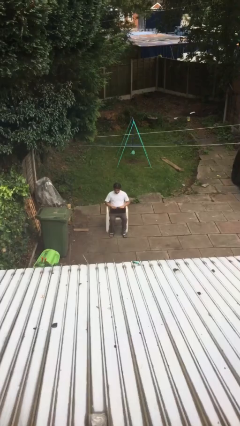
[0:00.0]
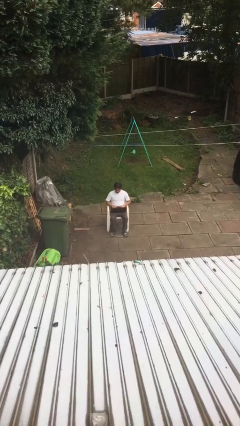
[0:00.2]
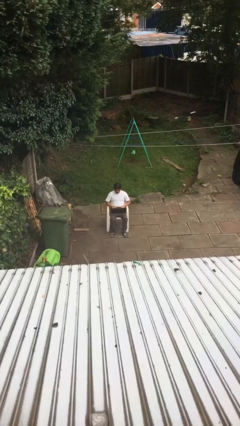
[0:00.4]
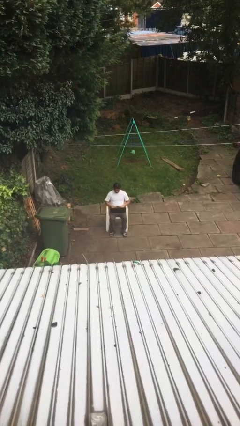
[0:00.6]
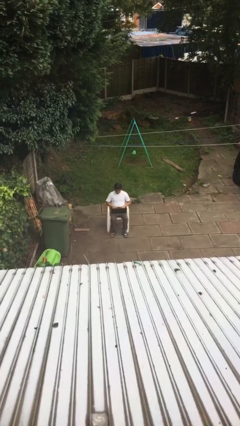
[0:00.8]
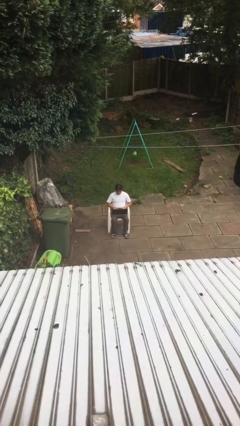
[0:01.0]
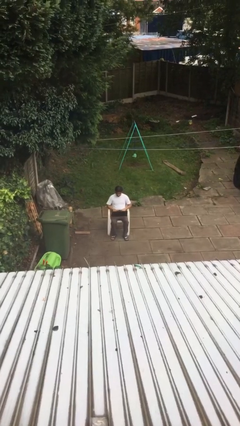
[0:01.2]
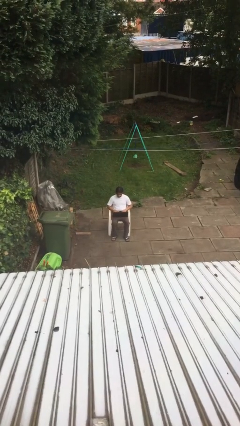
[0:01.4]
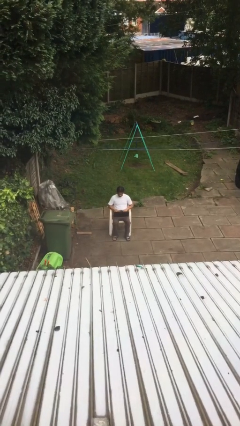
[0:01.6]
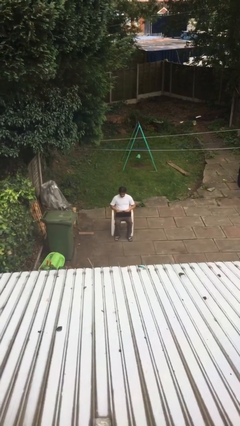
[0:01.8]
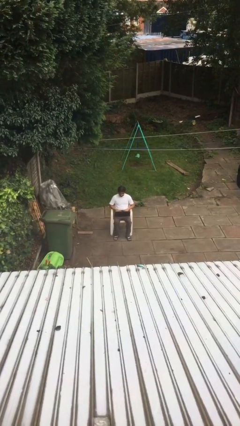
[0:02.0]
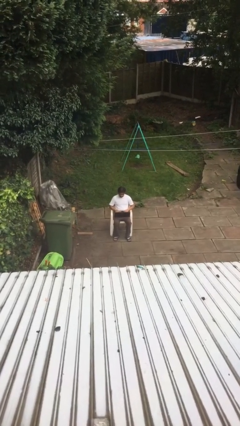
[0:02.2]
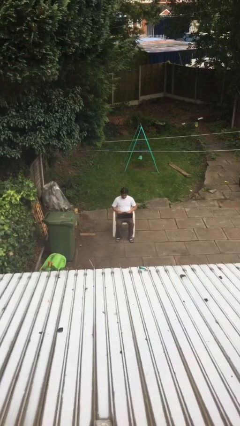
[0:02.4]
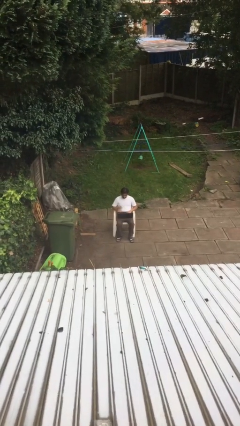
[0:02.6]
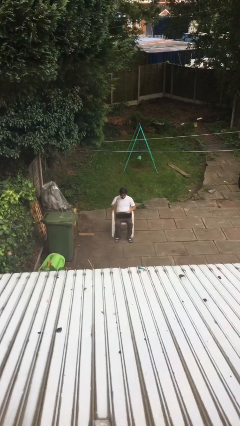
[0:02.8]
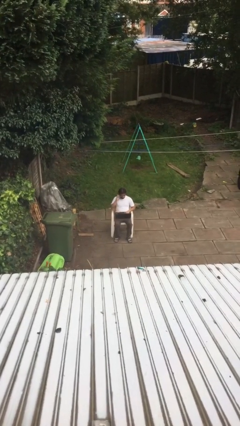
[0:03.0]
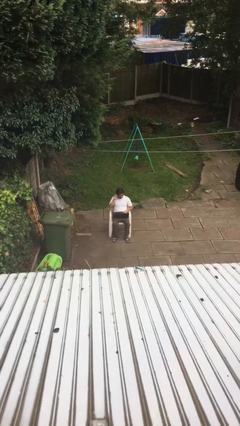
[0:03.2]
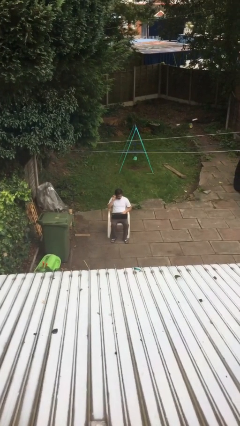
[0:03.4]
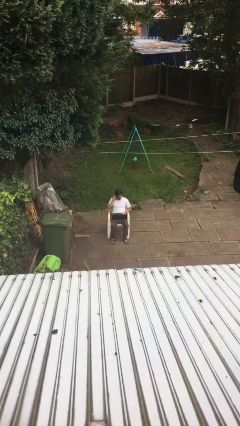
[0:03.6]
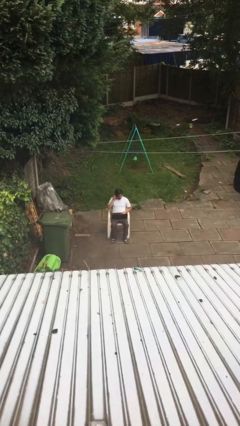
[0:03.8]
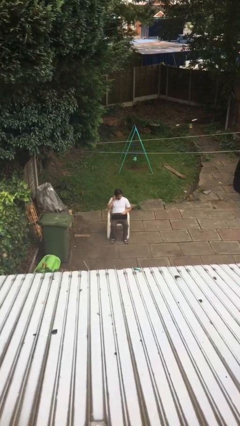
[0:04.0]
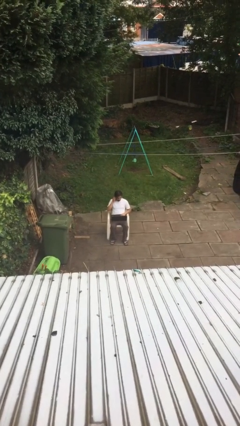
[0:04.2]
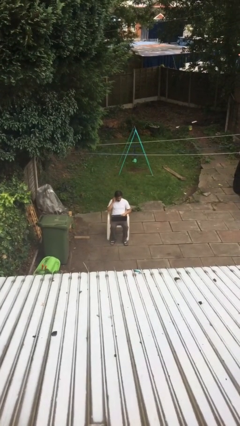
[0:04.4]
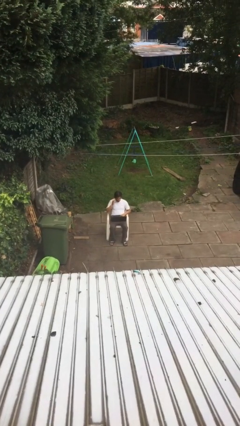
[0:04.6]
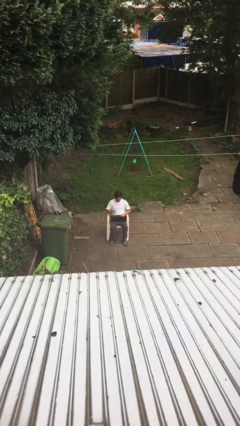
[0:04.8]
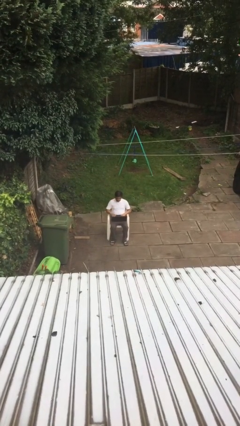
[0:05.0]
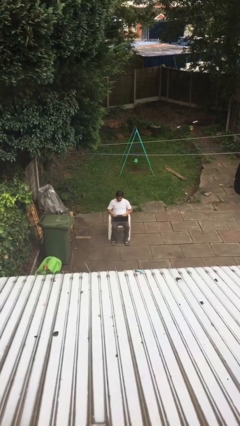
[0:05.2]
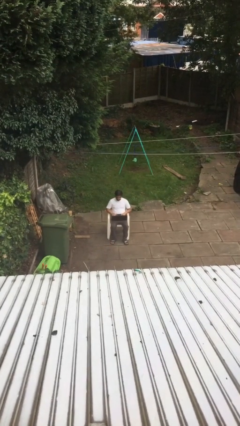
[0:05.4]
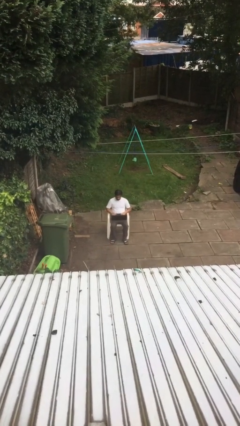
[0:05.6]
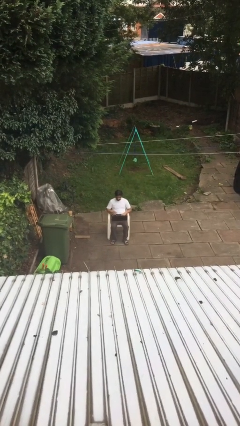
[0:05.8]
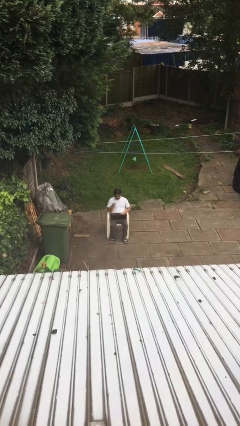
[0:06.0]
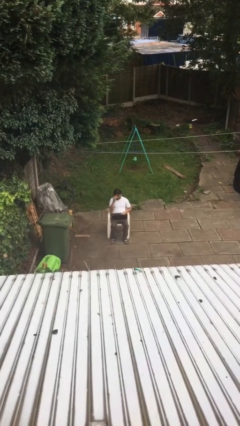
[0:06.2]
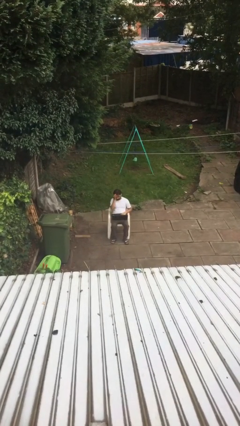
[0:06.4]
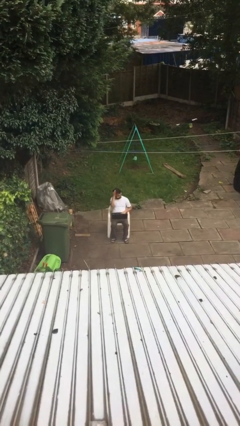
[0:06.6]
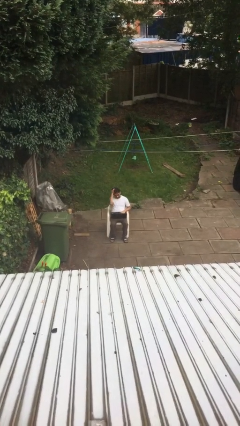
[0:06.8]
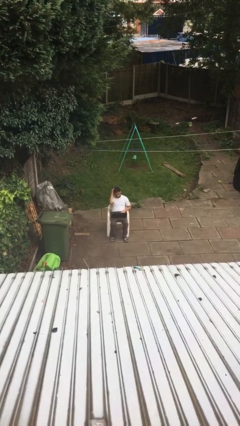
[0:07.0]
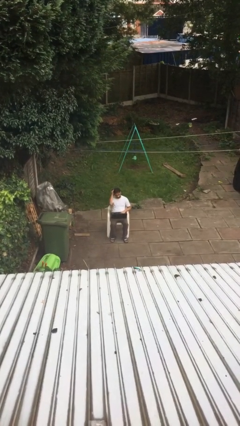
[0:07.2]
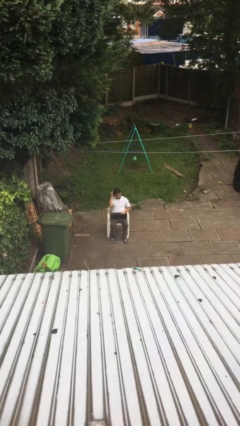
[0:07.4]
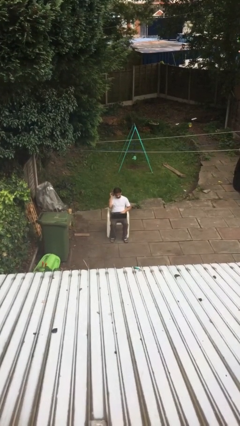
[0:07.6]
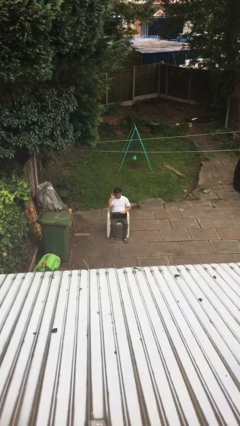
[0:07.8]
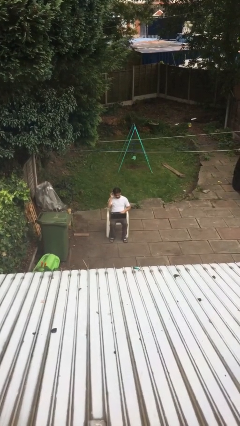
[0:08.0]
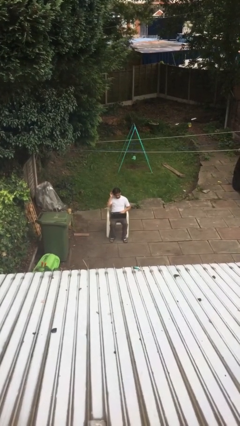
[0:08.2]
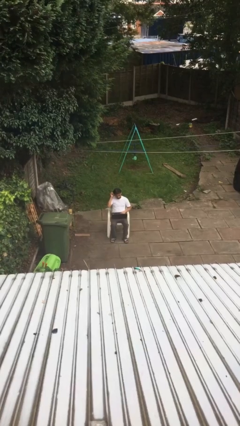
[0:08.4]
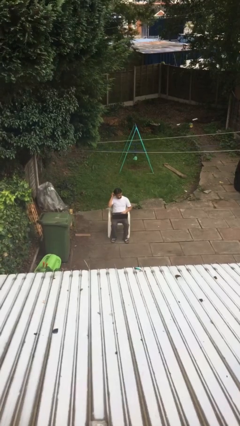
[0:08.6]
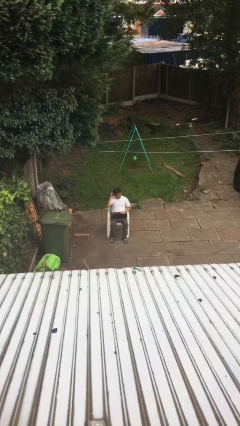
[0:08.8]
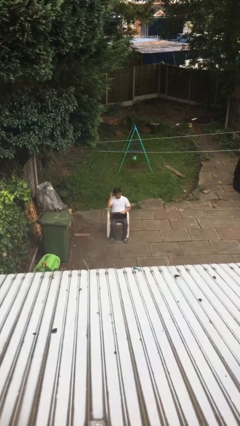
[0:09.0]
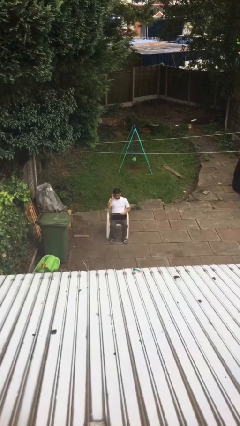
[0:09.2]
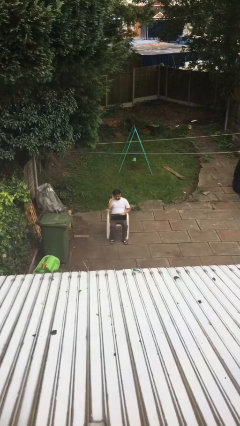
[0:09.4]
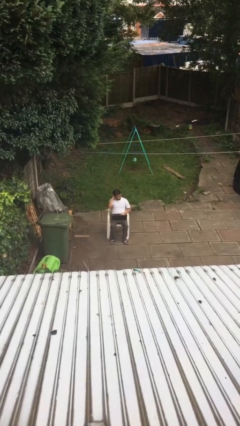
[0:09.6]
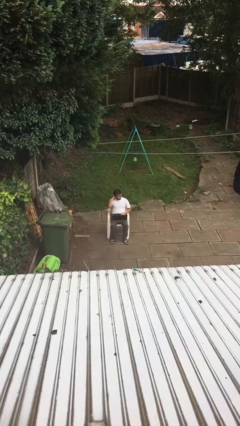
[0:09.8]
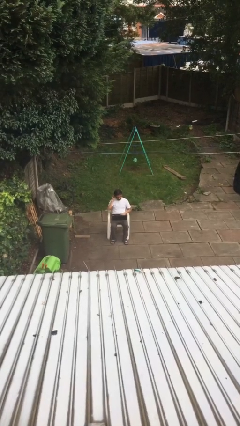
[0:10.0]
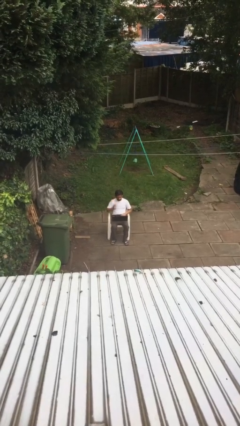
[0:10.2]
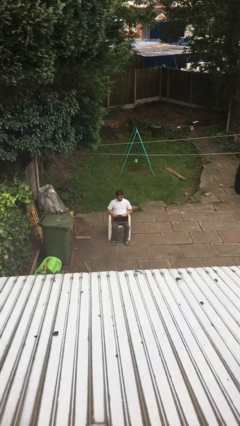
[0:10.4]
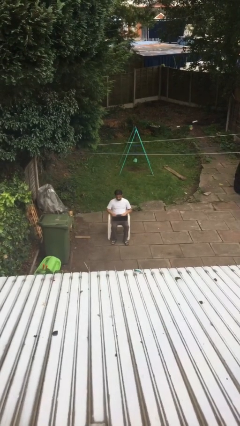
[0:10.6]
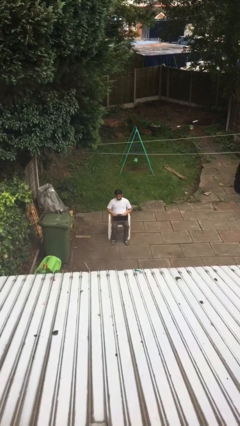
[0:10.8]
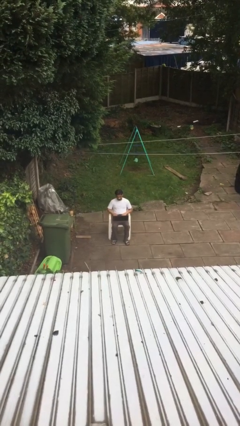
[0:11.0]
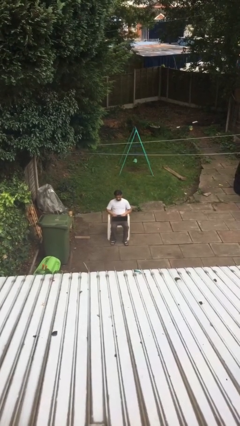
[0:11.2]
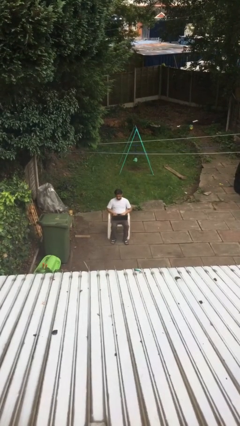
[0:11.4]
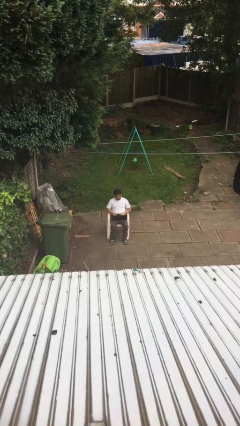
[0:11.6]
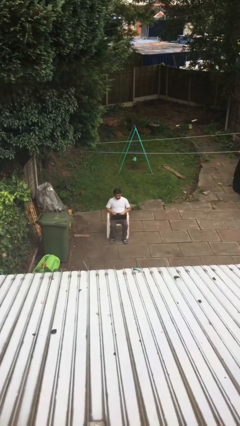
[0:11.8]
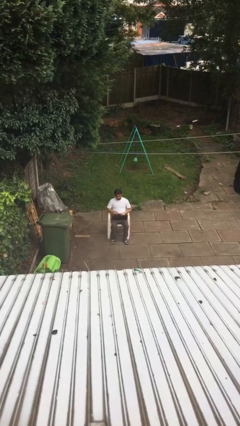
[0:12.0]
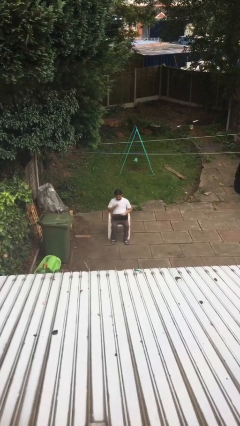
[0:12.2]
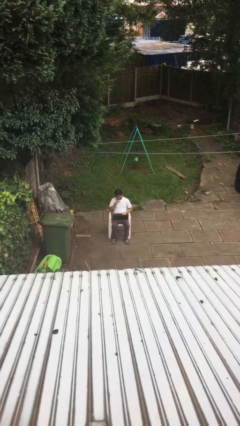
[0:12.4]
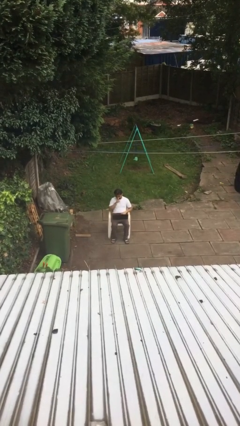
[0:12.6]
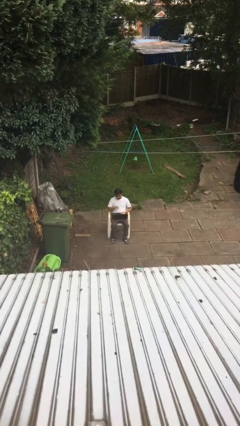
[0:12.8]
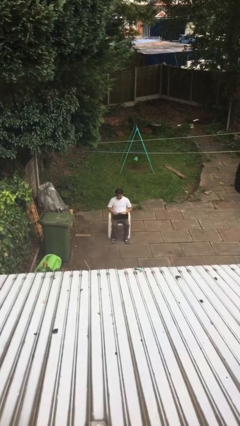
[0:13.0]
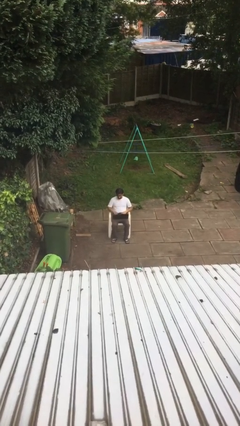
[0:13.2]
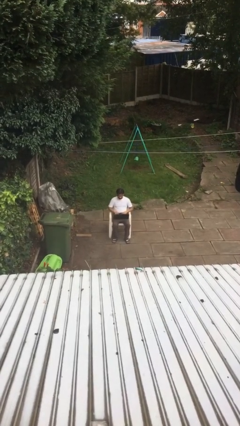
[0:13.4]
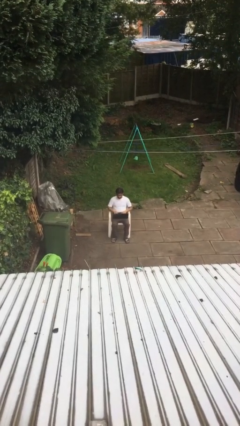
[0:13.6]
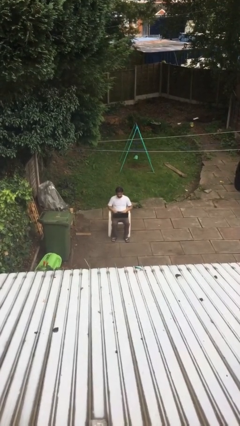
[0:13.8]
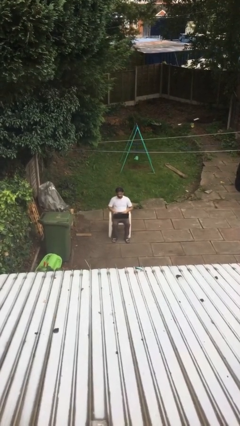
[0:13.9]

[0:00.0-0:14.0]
person interacts with laptop

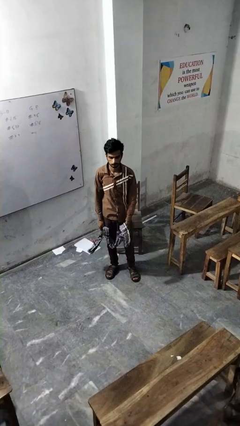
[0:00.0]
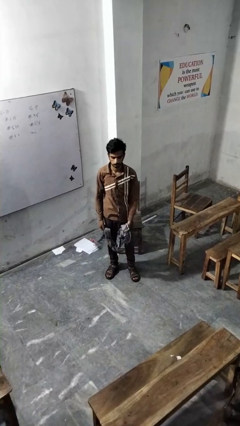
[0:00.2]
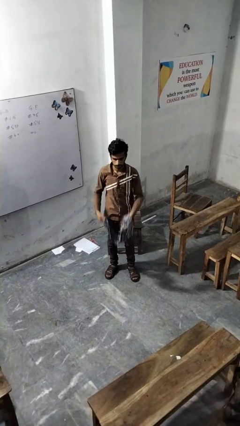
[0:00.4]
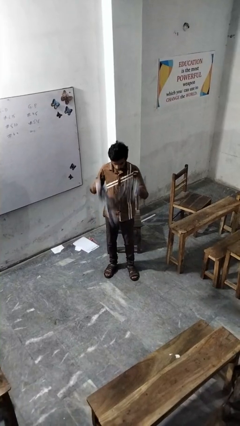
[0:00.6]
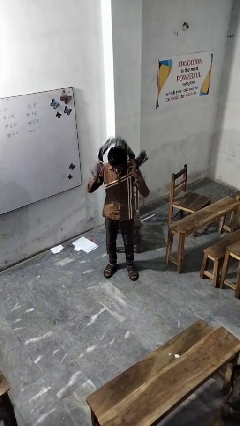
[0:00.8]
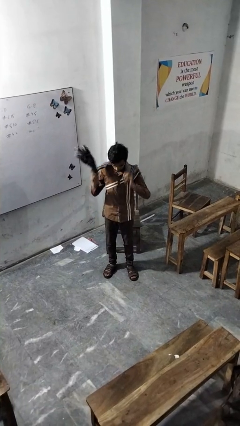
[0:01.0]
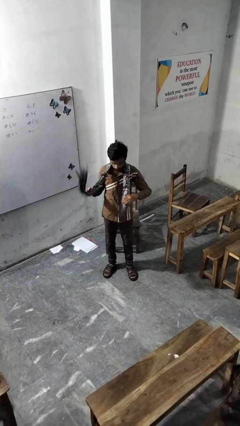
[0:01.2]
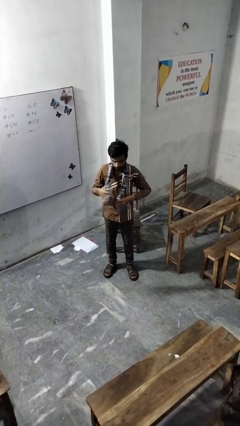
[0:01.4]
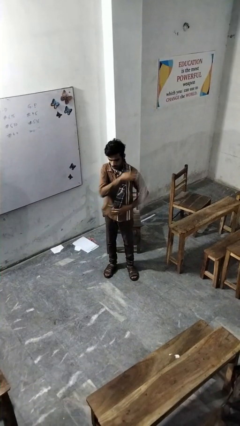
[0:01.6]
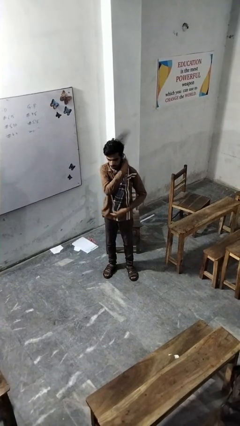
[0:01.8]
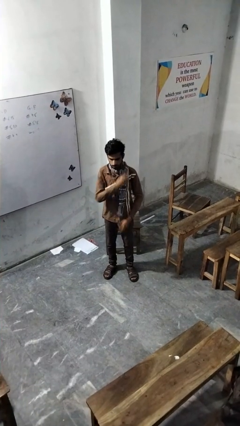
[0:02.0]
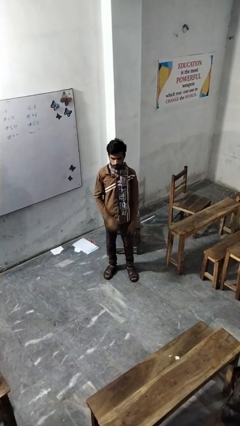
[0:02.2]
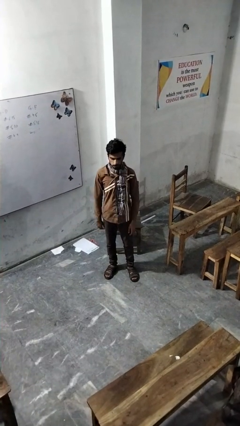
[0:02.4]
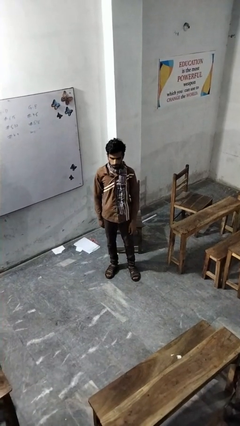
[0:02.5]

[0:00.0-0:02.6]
person puts on scarf

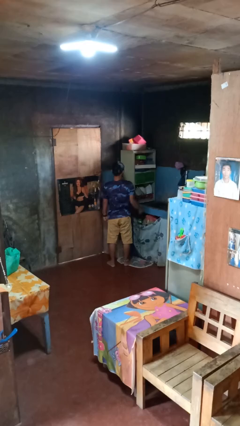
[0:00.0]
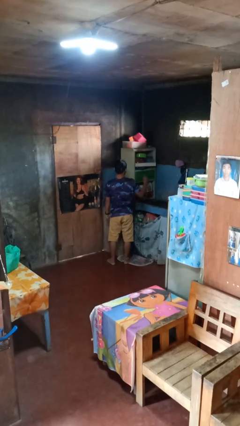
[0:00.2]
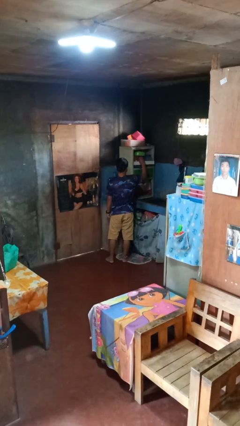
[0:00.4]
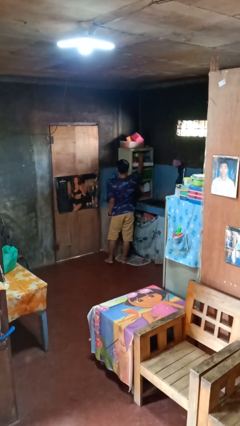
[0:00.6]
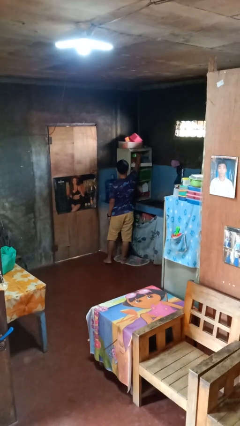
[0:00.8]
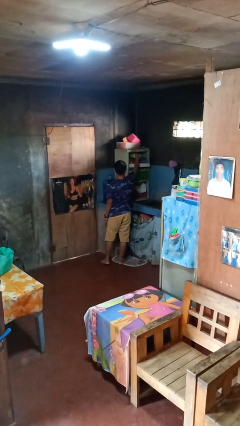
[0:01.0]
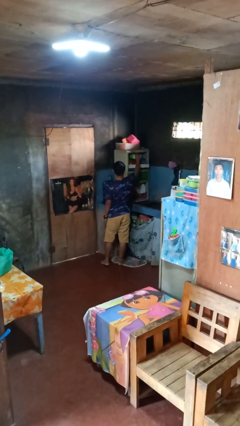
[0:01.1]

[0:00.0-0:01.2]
person takes object from cabinet

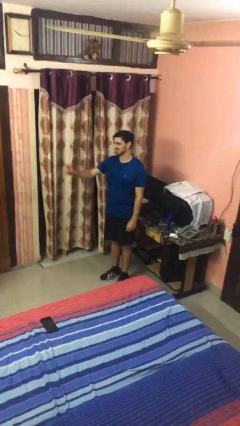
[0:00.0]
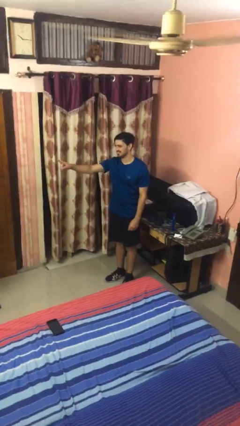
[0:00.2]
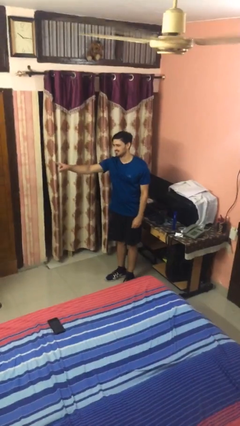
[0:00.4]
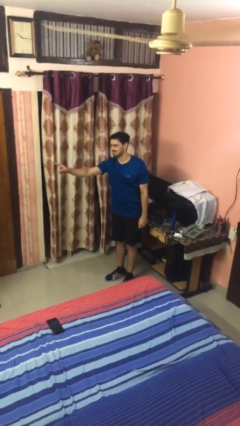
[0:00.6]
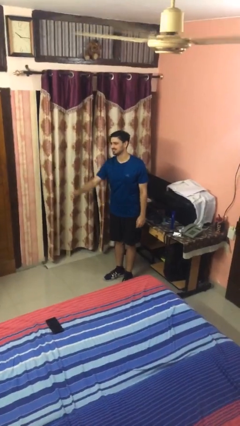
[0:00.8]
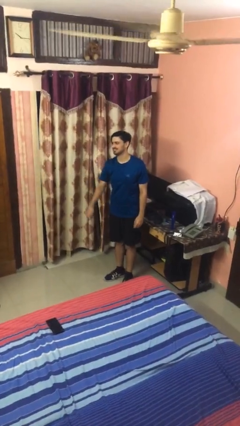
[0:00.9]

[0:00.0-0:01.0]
person points at person
